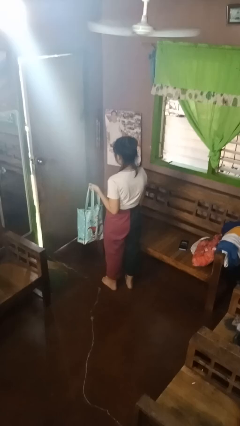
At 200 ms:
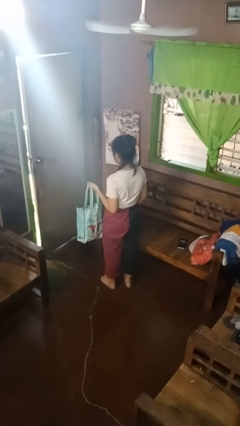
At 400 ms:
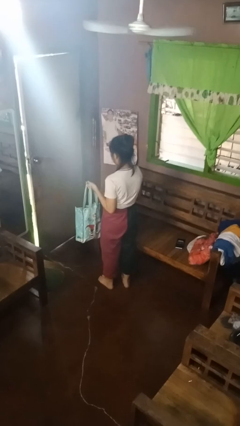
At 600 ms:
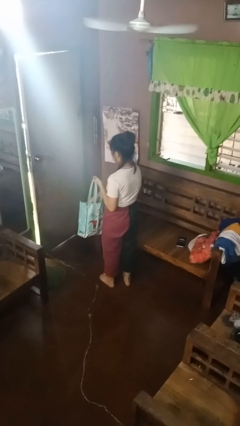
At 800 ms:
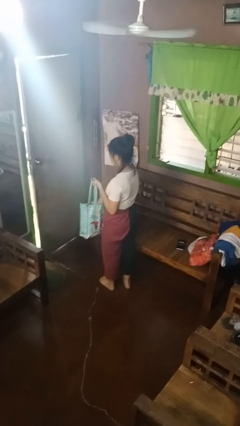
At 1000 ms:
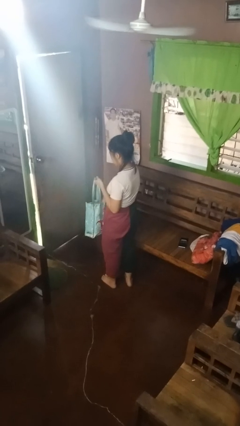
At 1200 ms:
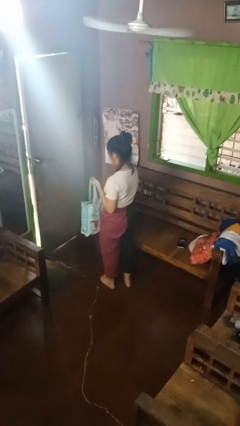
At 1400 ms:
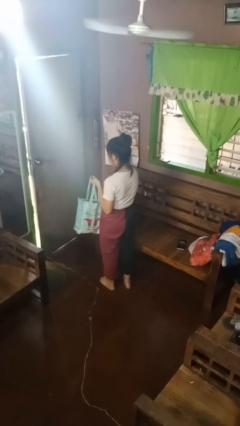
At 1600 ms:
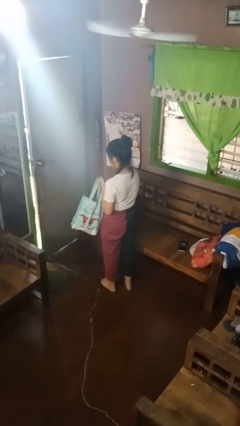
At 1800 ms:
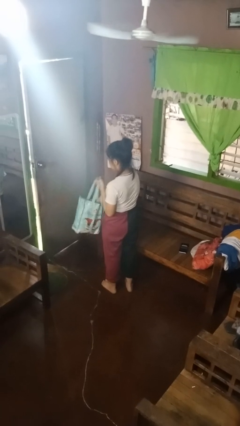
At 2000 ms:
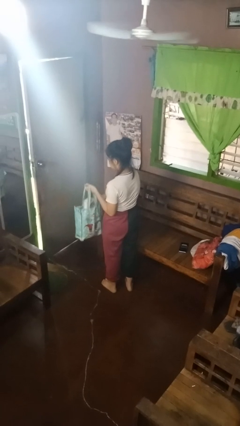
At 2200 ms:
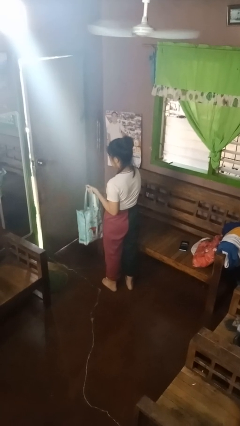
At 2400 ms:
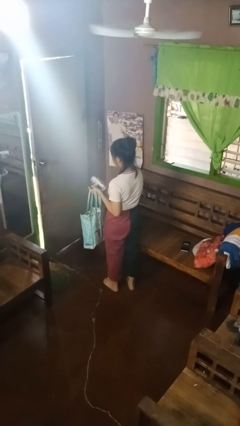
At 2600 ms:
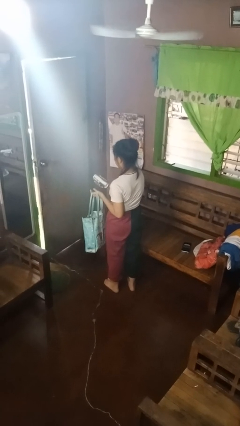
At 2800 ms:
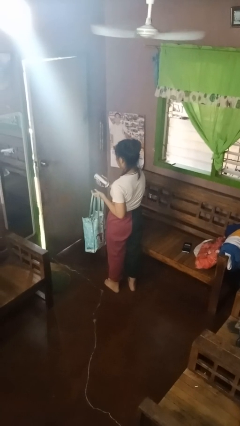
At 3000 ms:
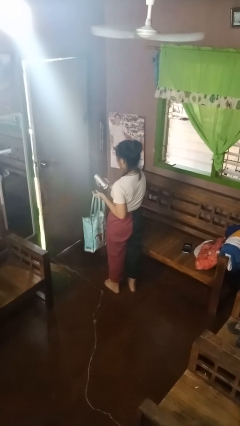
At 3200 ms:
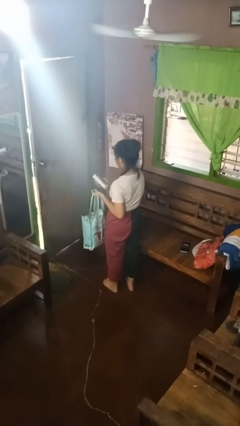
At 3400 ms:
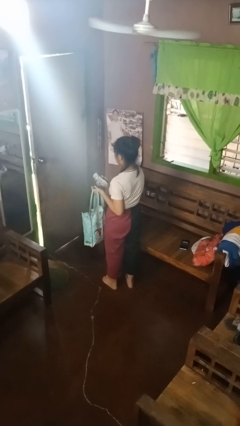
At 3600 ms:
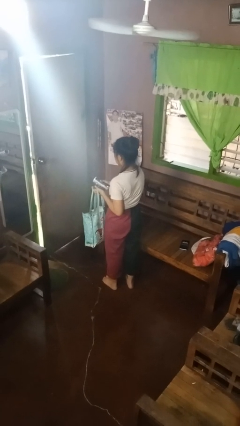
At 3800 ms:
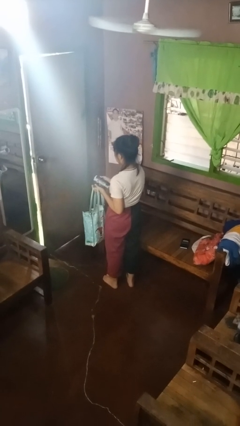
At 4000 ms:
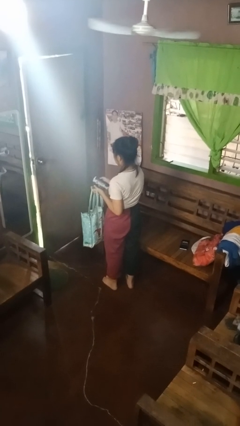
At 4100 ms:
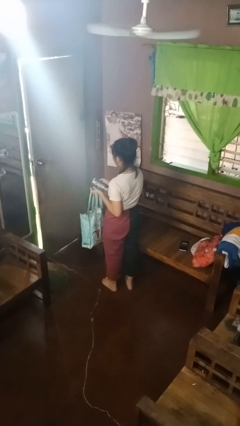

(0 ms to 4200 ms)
person takes object from bag

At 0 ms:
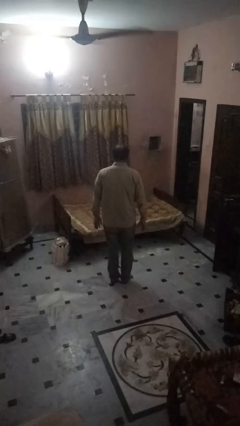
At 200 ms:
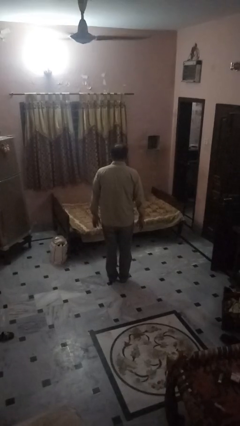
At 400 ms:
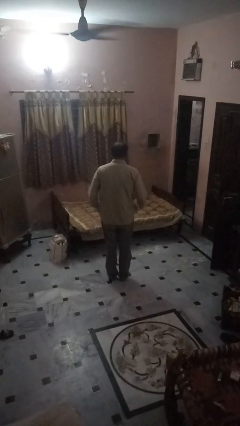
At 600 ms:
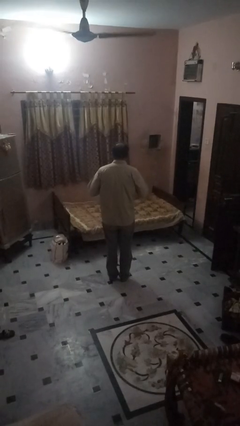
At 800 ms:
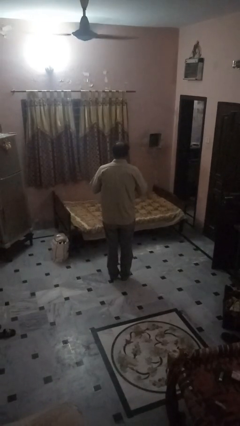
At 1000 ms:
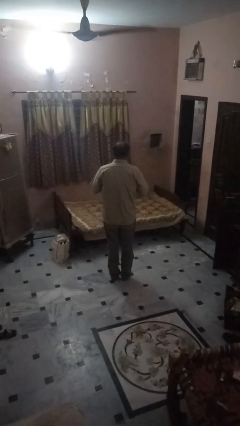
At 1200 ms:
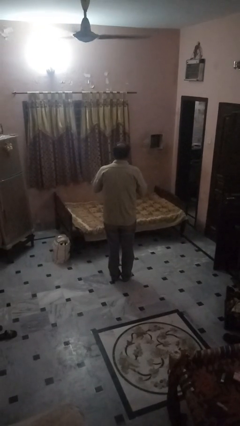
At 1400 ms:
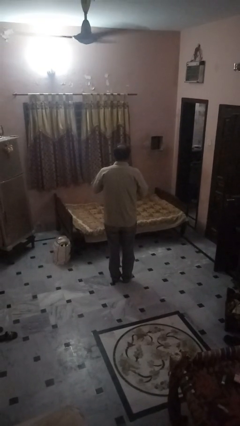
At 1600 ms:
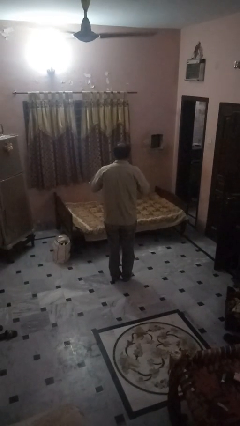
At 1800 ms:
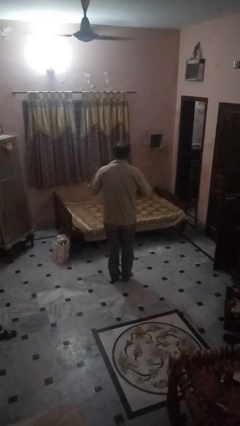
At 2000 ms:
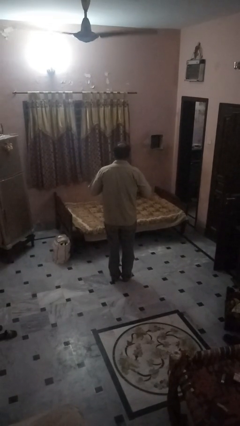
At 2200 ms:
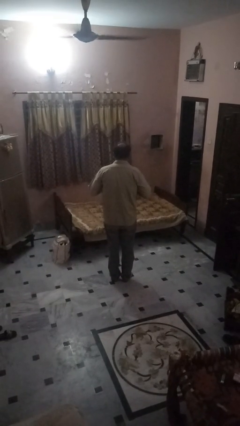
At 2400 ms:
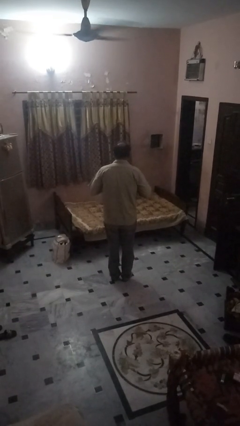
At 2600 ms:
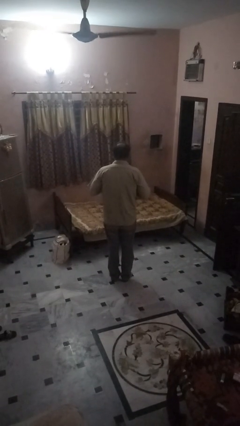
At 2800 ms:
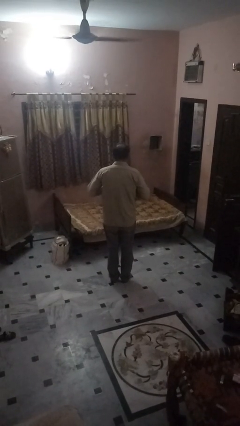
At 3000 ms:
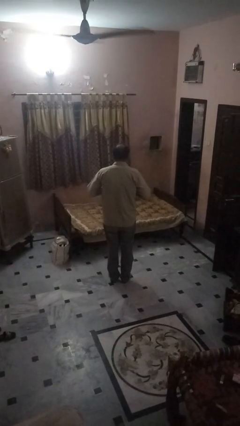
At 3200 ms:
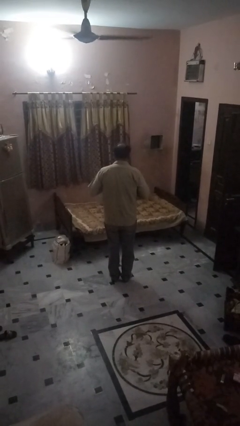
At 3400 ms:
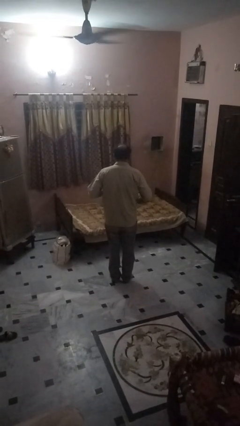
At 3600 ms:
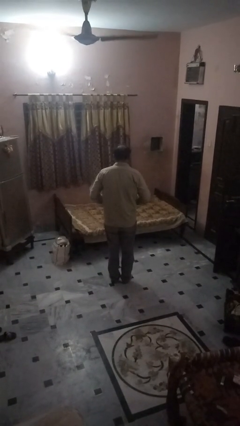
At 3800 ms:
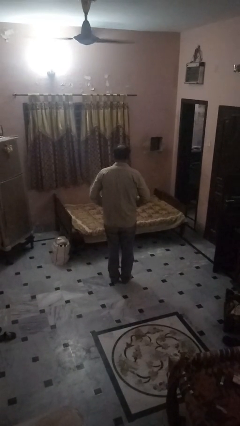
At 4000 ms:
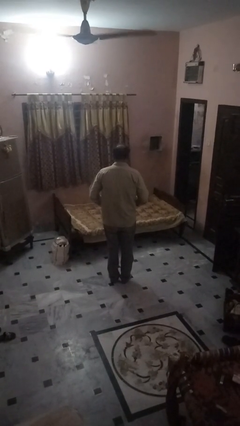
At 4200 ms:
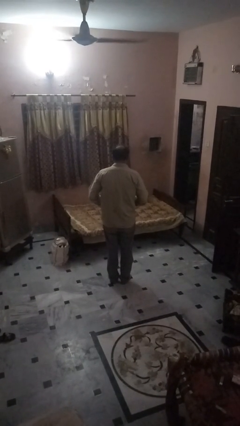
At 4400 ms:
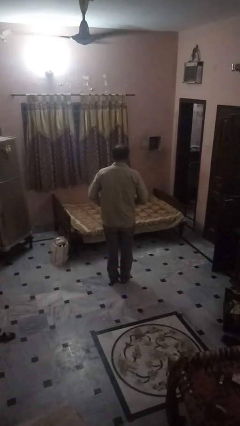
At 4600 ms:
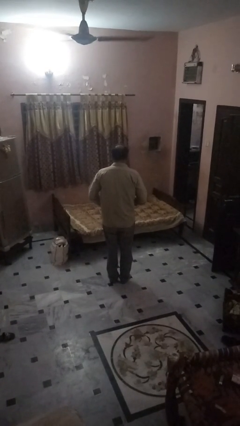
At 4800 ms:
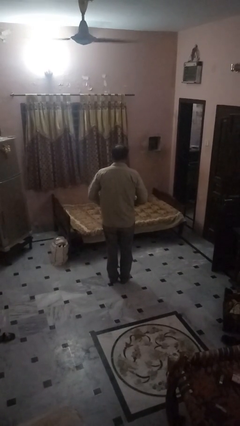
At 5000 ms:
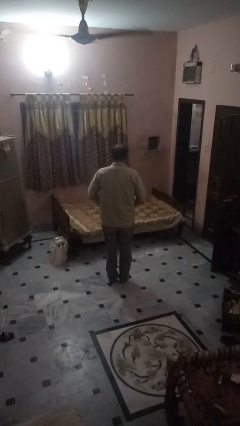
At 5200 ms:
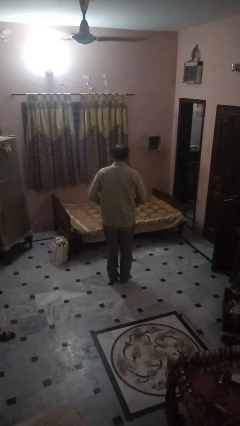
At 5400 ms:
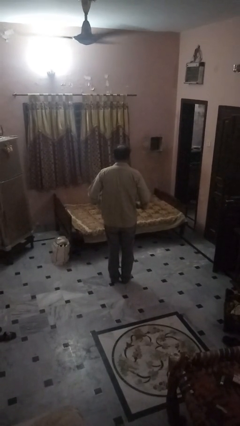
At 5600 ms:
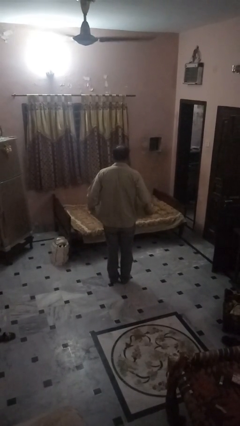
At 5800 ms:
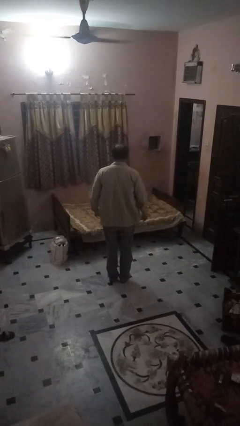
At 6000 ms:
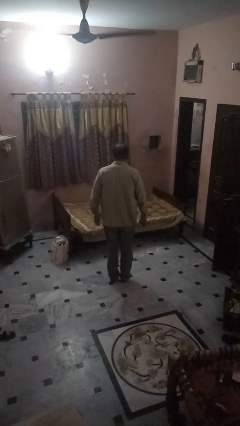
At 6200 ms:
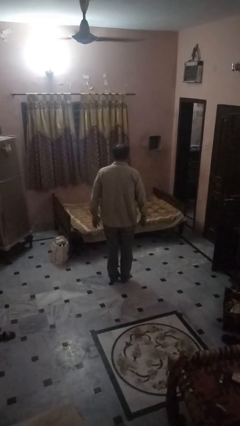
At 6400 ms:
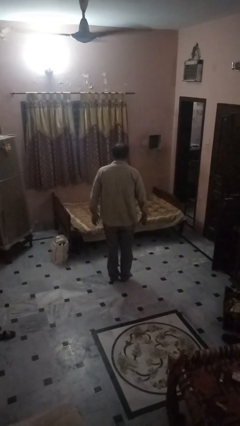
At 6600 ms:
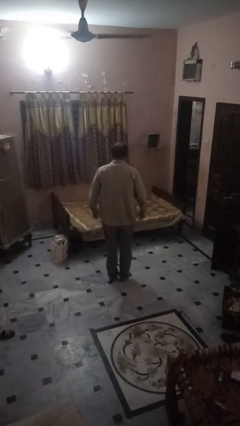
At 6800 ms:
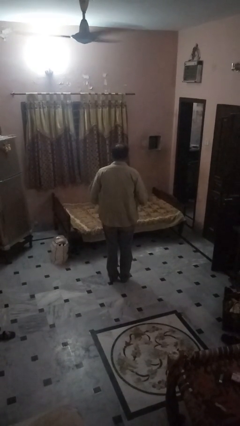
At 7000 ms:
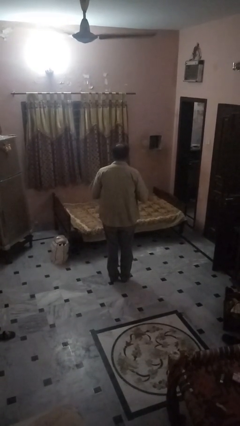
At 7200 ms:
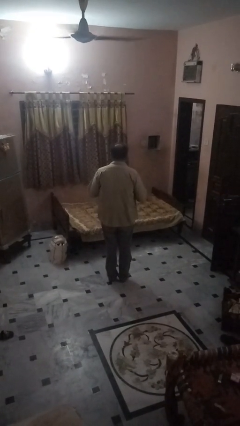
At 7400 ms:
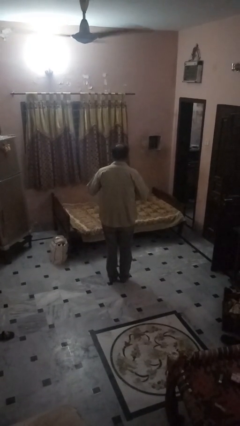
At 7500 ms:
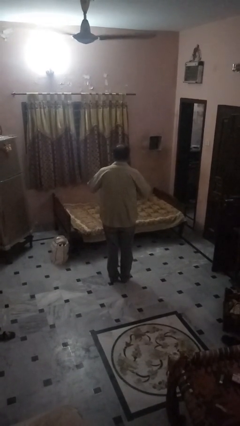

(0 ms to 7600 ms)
person unbuttons shirt

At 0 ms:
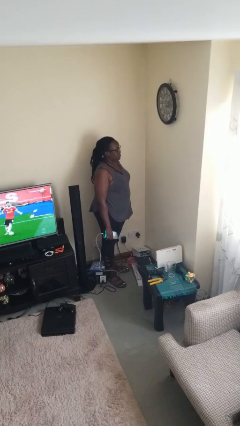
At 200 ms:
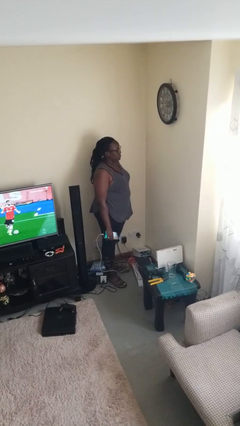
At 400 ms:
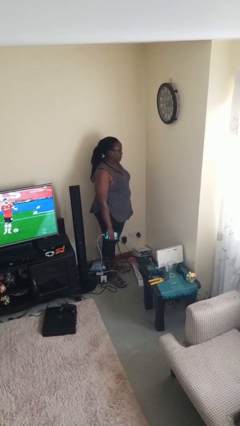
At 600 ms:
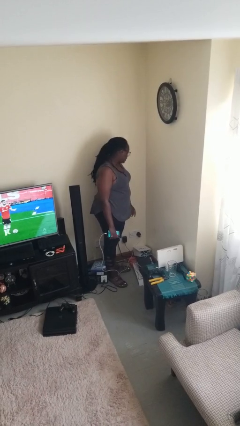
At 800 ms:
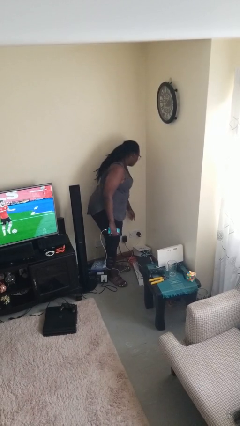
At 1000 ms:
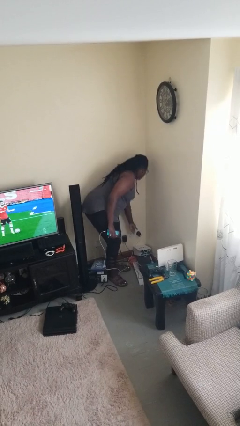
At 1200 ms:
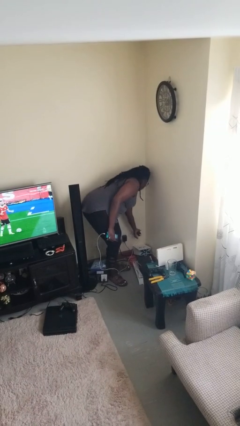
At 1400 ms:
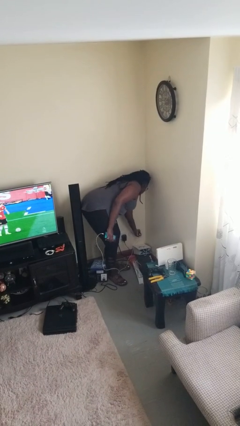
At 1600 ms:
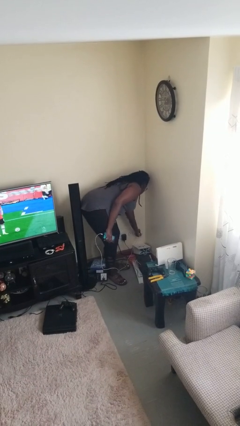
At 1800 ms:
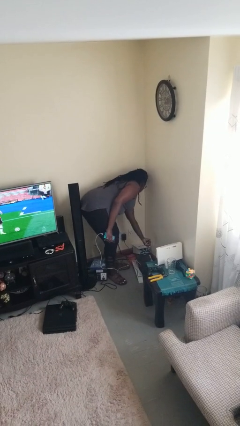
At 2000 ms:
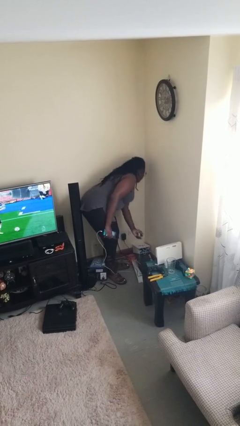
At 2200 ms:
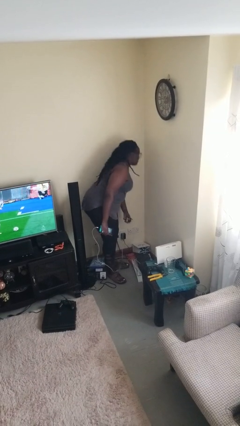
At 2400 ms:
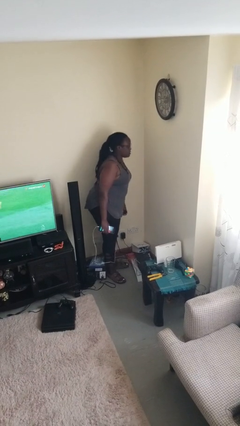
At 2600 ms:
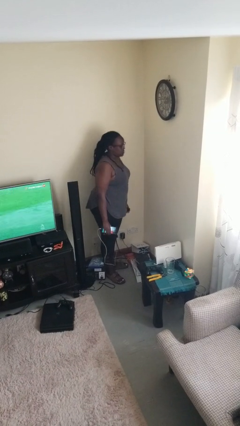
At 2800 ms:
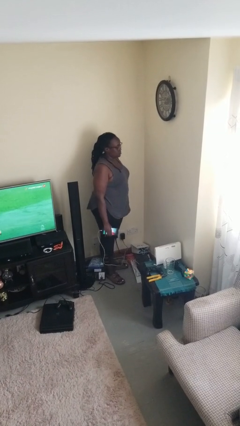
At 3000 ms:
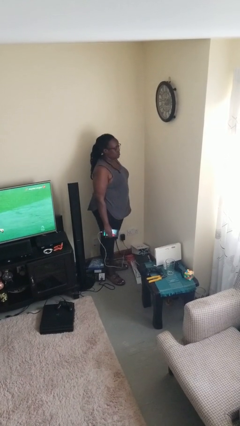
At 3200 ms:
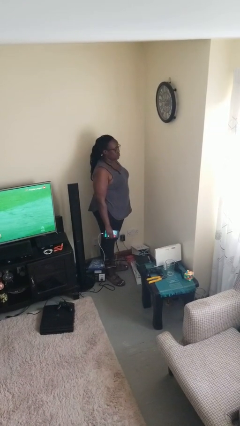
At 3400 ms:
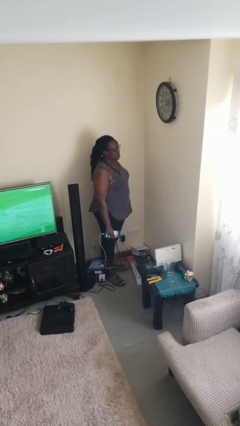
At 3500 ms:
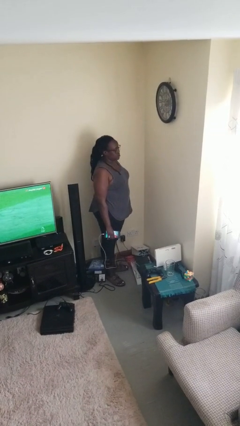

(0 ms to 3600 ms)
person unplugs from electrical socket

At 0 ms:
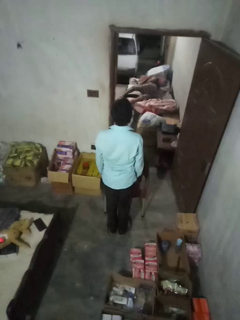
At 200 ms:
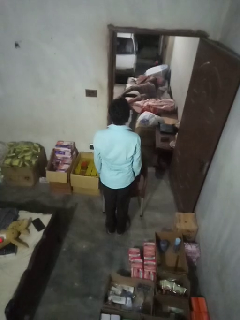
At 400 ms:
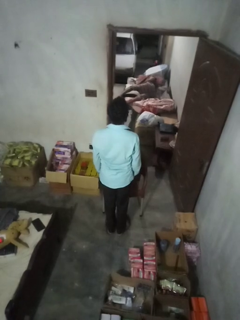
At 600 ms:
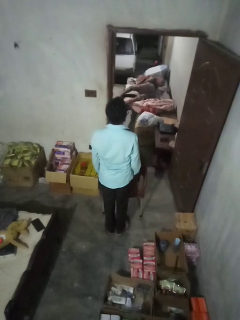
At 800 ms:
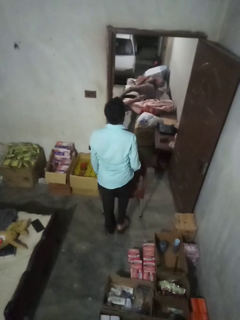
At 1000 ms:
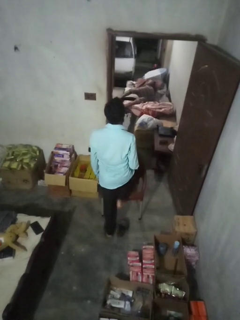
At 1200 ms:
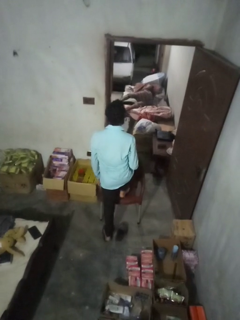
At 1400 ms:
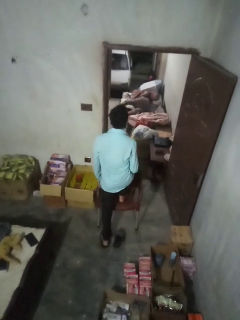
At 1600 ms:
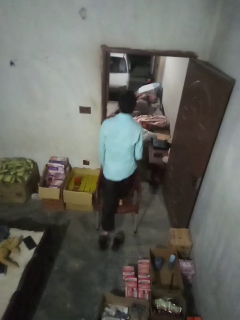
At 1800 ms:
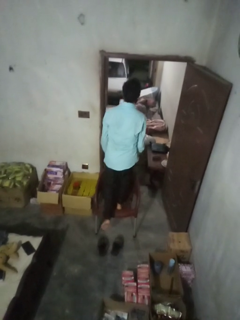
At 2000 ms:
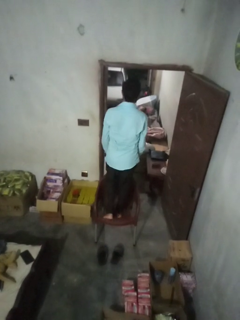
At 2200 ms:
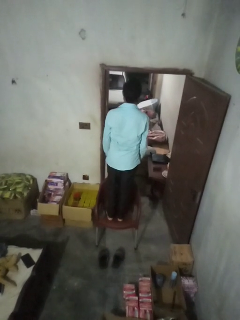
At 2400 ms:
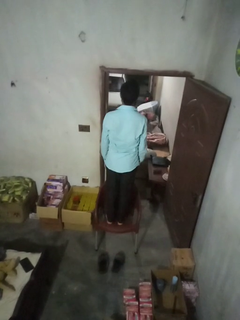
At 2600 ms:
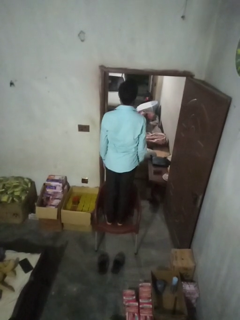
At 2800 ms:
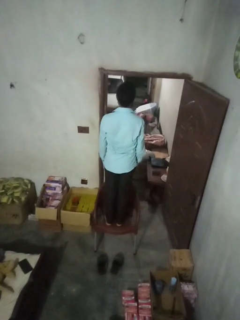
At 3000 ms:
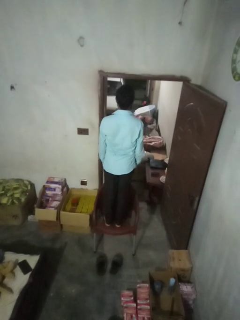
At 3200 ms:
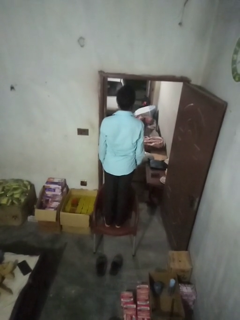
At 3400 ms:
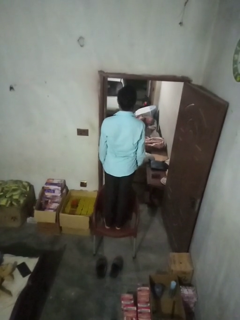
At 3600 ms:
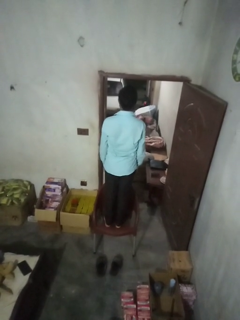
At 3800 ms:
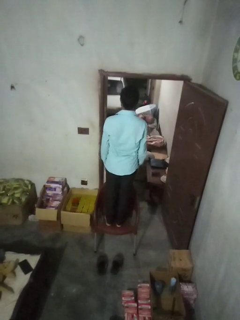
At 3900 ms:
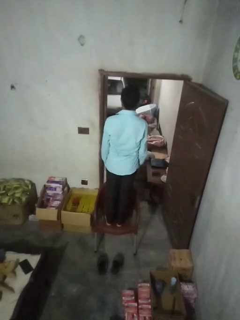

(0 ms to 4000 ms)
person climbs on chair
